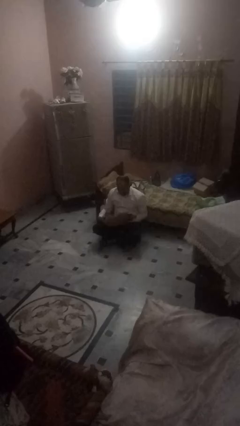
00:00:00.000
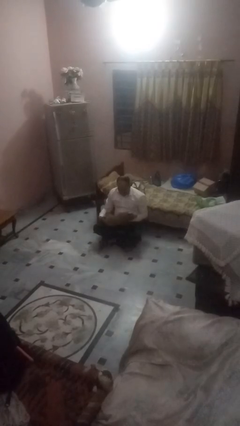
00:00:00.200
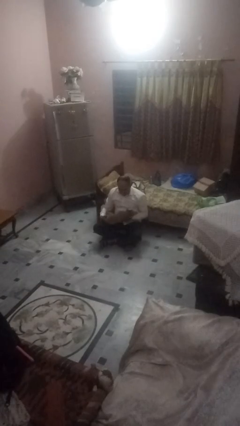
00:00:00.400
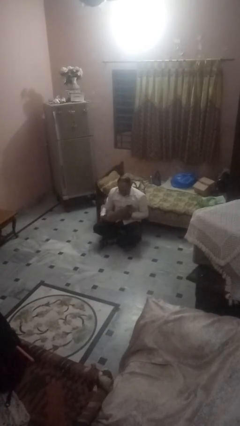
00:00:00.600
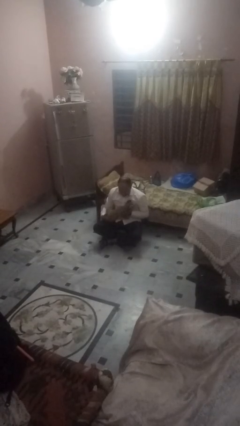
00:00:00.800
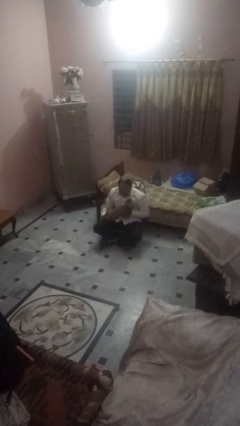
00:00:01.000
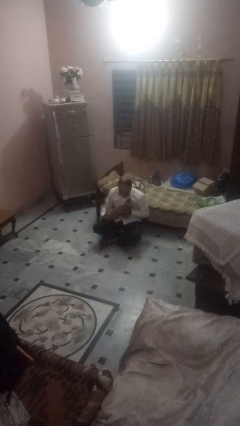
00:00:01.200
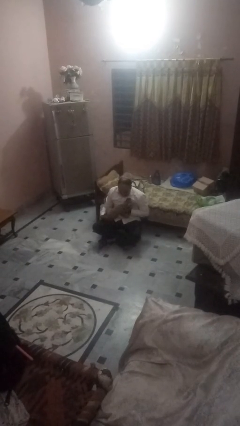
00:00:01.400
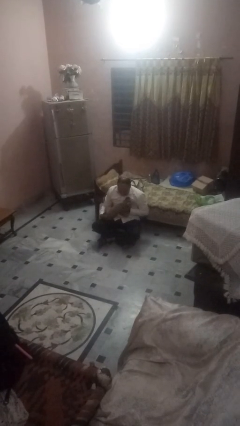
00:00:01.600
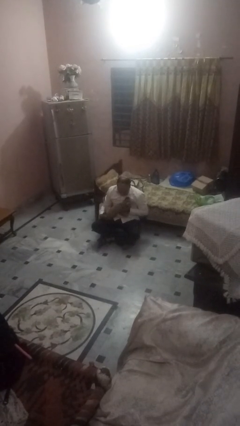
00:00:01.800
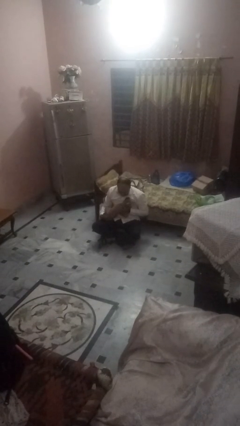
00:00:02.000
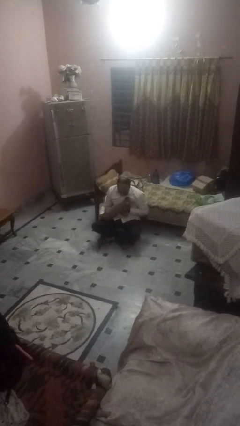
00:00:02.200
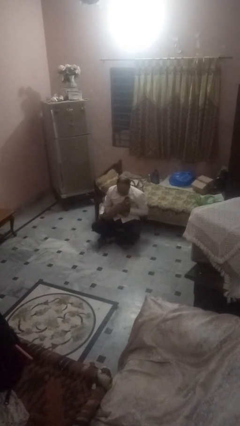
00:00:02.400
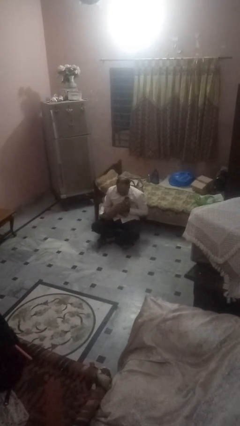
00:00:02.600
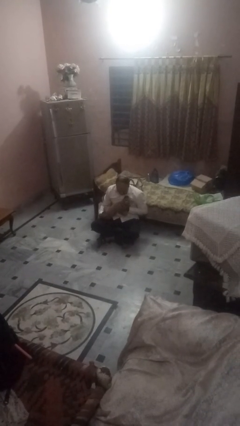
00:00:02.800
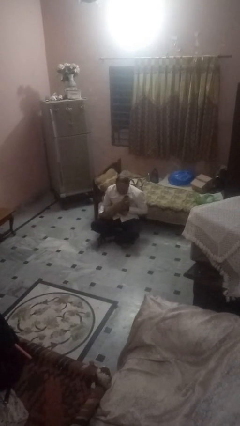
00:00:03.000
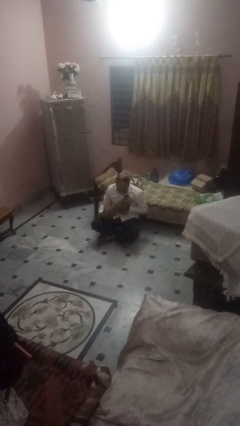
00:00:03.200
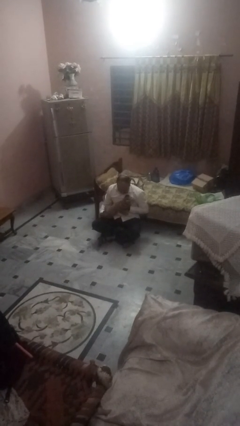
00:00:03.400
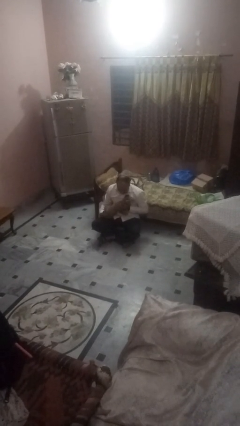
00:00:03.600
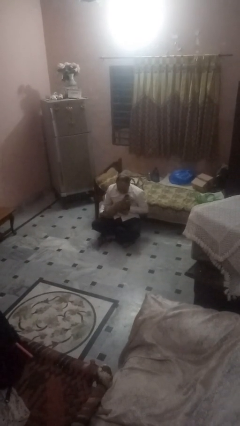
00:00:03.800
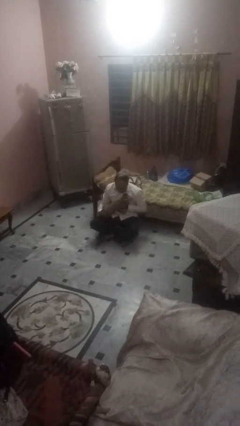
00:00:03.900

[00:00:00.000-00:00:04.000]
person hugs dog

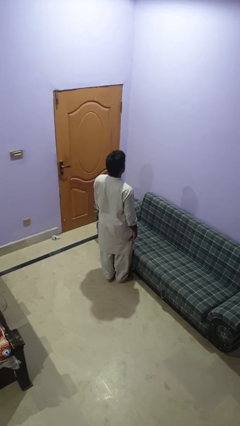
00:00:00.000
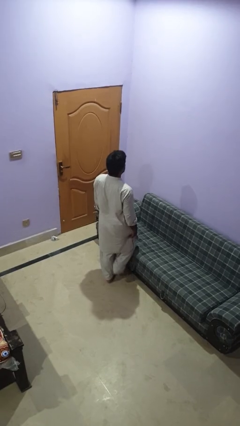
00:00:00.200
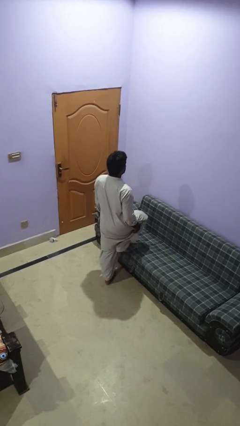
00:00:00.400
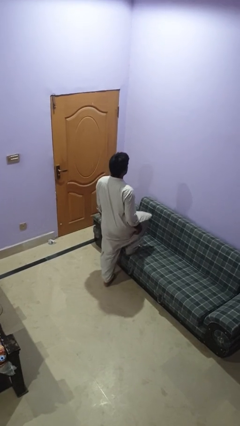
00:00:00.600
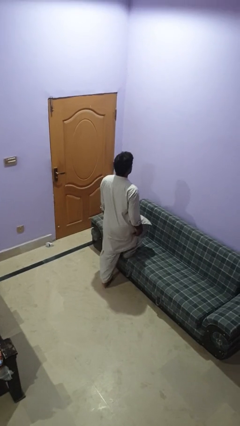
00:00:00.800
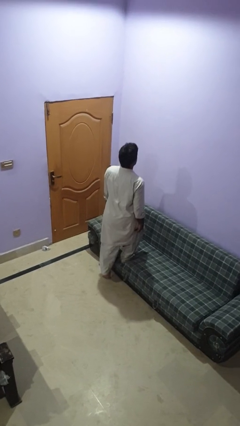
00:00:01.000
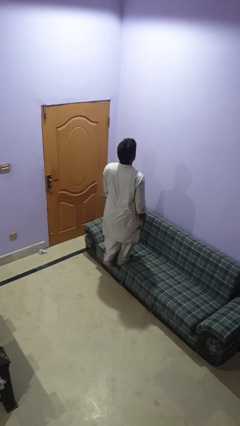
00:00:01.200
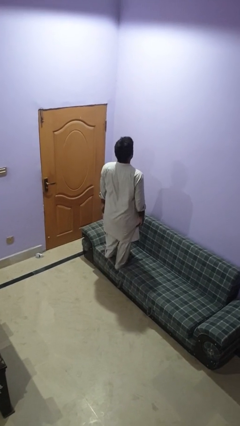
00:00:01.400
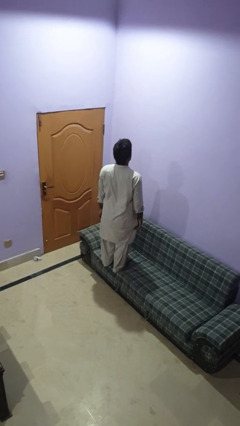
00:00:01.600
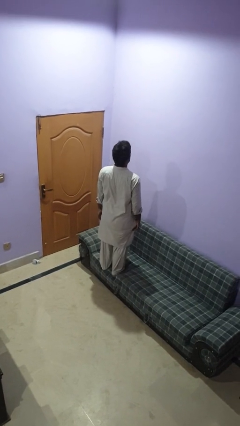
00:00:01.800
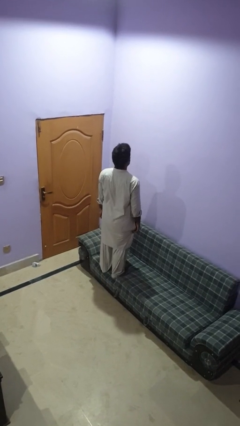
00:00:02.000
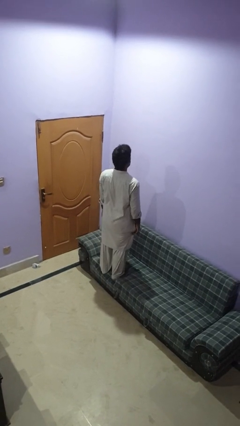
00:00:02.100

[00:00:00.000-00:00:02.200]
person climbs on couch

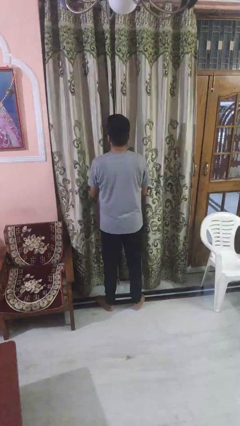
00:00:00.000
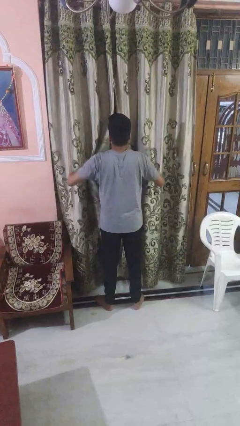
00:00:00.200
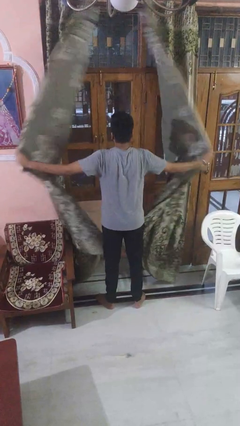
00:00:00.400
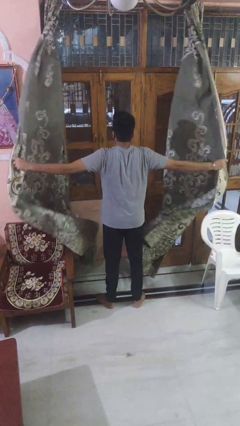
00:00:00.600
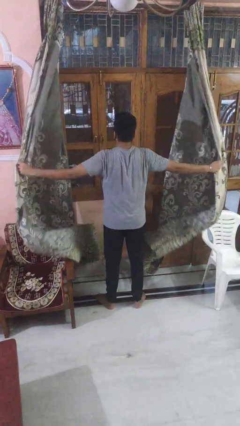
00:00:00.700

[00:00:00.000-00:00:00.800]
person opens curtains

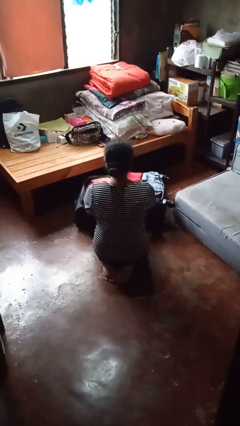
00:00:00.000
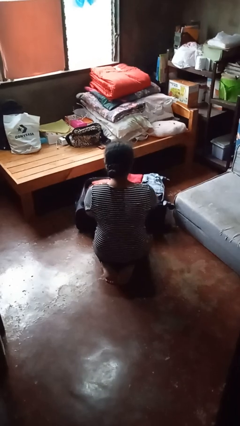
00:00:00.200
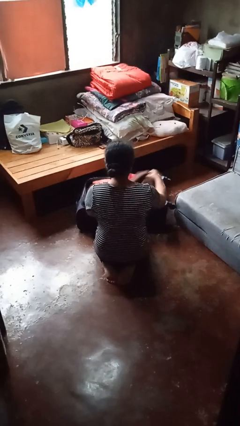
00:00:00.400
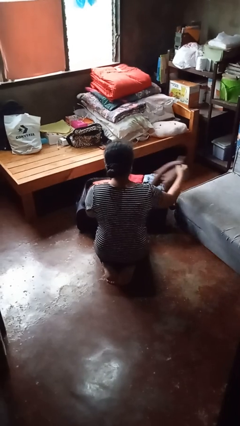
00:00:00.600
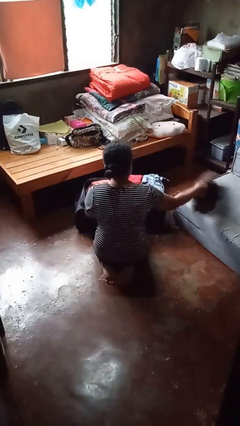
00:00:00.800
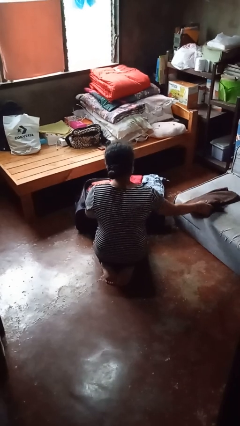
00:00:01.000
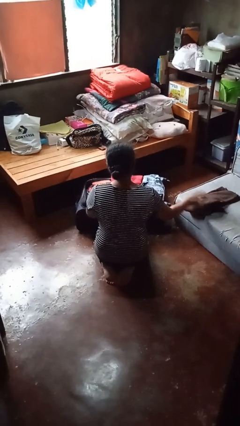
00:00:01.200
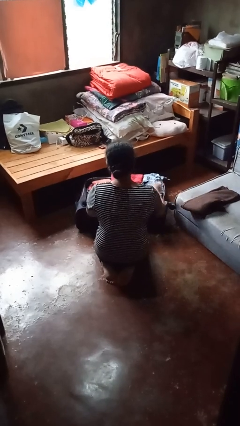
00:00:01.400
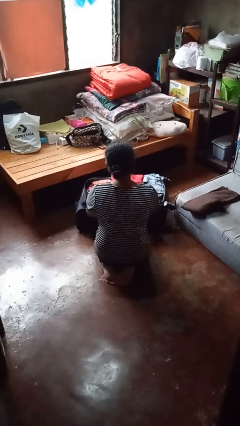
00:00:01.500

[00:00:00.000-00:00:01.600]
person unloads clothes from suitcase

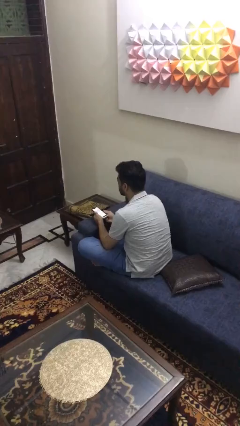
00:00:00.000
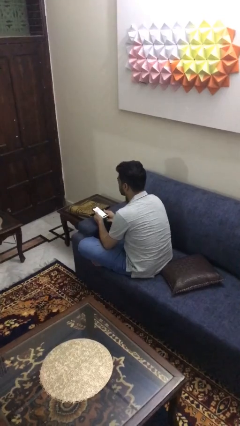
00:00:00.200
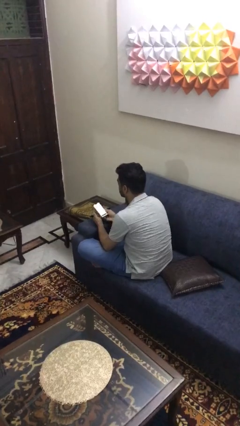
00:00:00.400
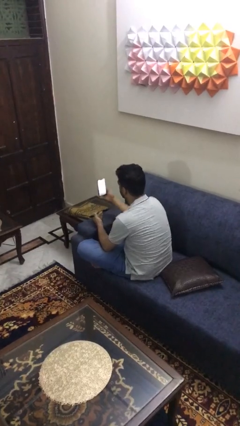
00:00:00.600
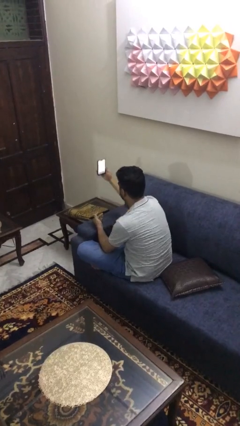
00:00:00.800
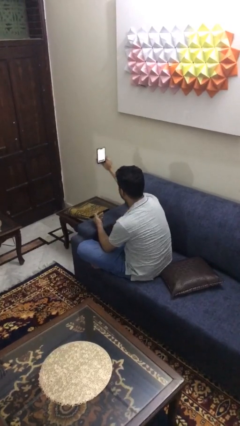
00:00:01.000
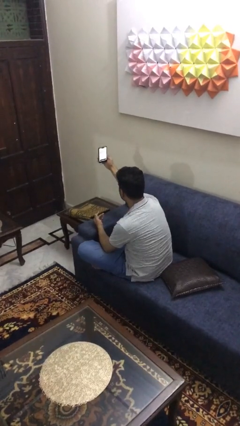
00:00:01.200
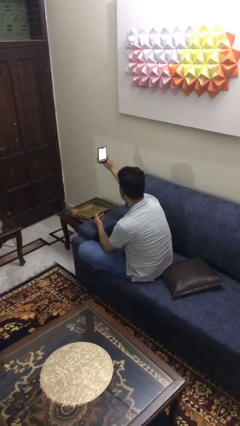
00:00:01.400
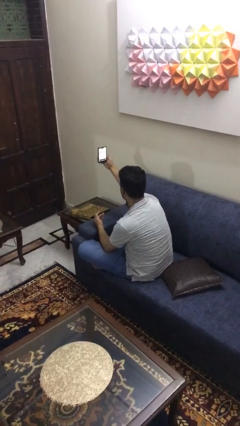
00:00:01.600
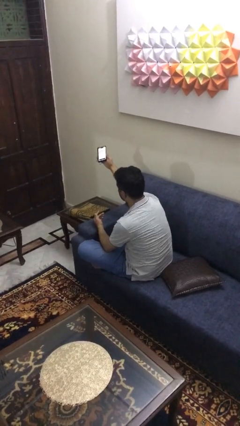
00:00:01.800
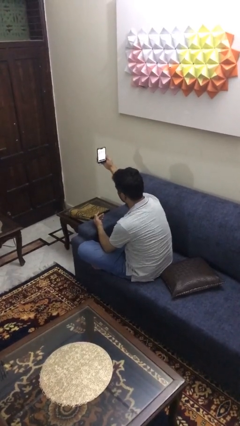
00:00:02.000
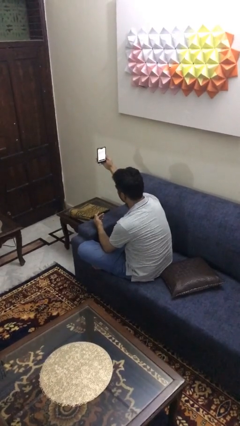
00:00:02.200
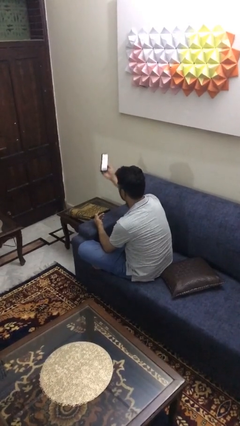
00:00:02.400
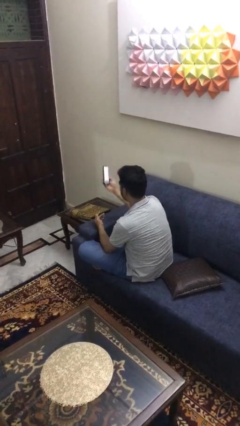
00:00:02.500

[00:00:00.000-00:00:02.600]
person takes selfie

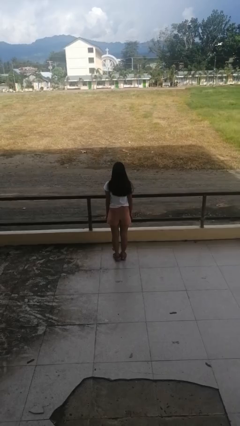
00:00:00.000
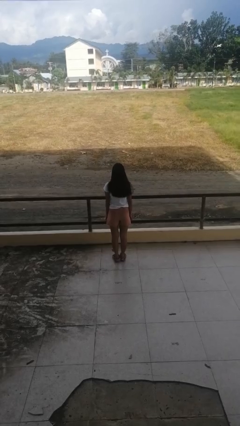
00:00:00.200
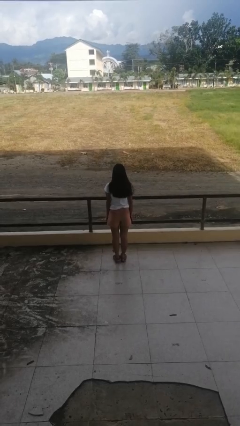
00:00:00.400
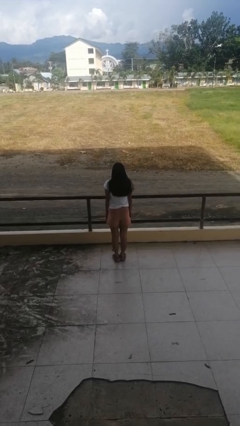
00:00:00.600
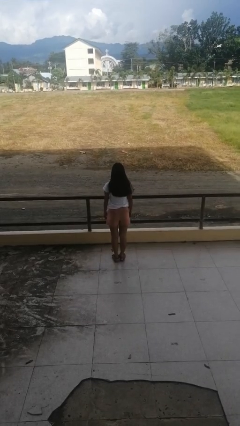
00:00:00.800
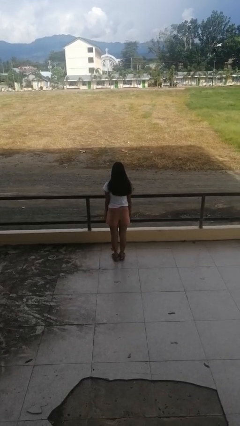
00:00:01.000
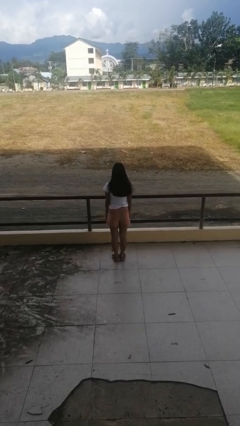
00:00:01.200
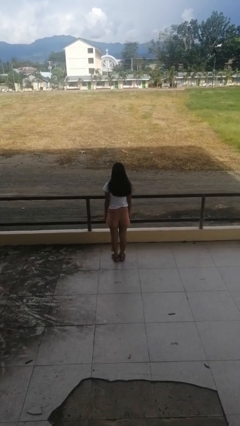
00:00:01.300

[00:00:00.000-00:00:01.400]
person shrugs

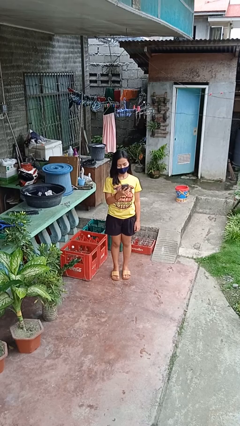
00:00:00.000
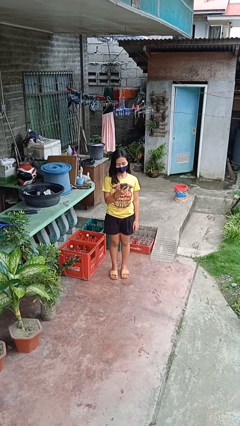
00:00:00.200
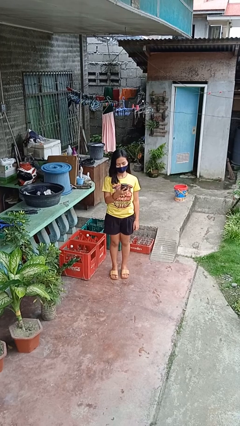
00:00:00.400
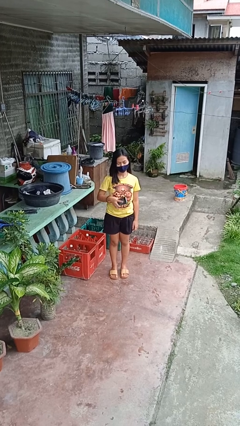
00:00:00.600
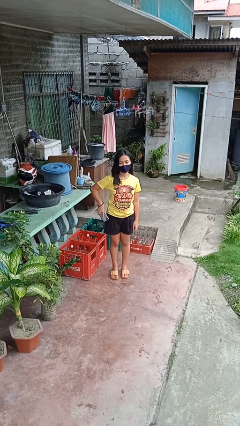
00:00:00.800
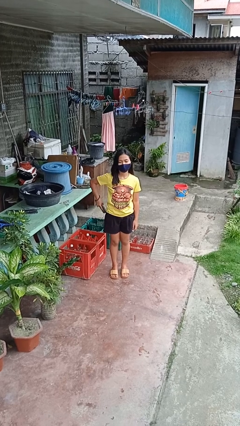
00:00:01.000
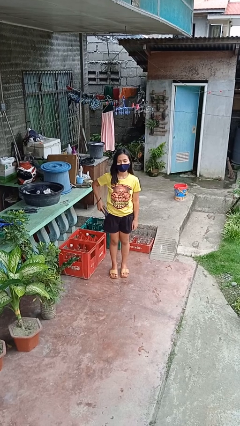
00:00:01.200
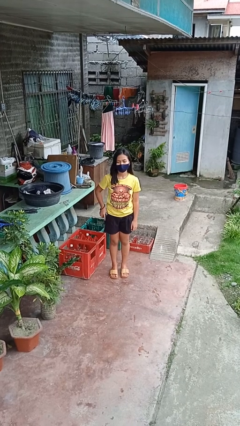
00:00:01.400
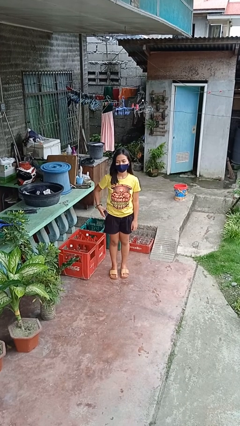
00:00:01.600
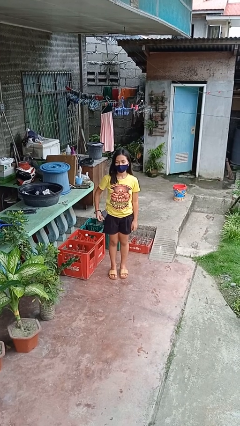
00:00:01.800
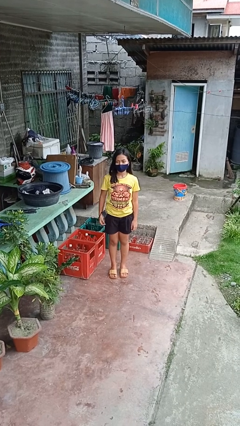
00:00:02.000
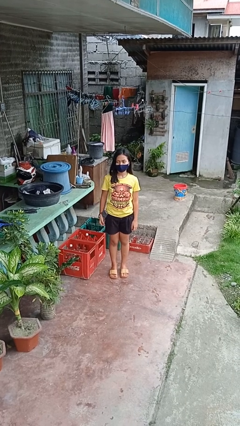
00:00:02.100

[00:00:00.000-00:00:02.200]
person puts phone into pocket

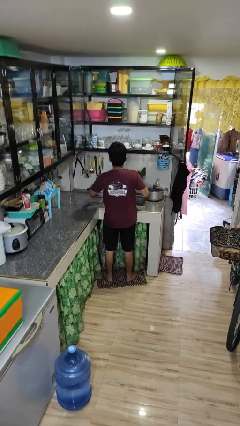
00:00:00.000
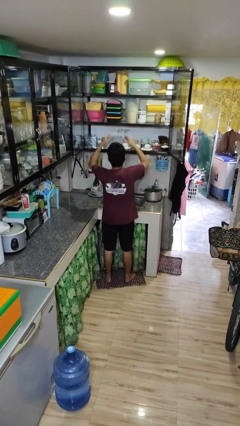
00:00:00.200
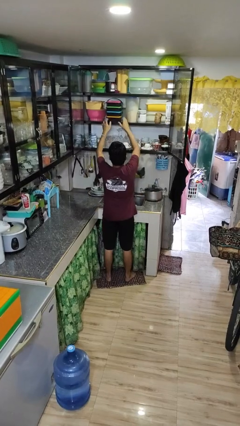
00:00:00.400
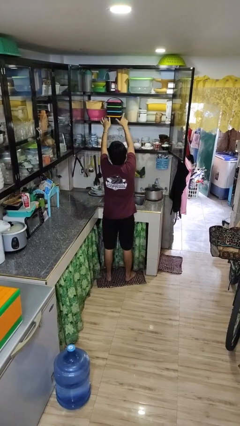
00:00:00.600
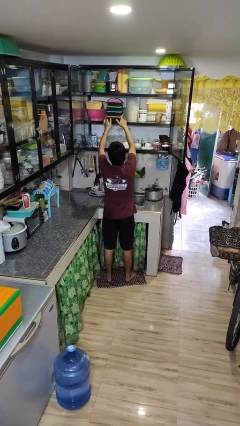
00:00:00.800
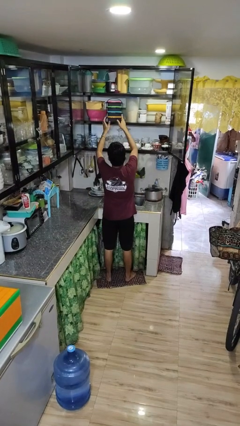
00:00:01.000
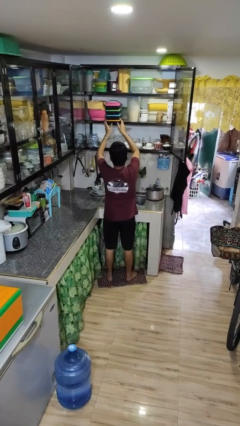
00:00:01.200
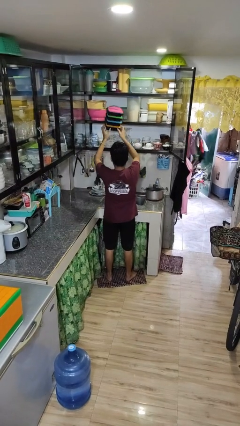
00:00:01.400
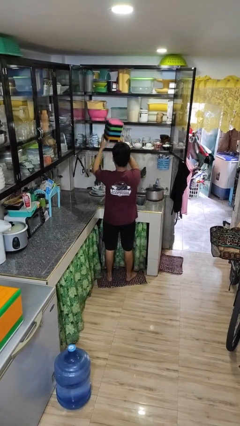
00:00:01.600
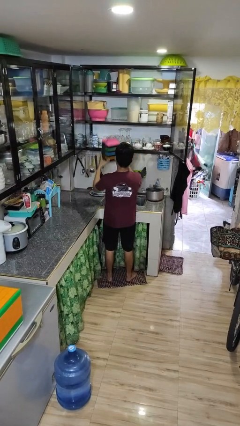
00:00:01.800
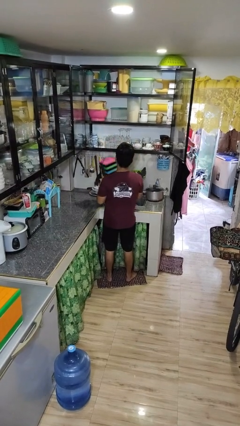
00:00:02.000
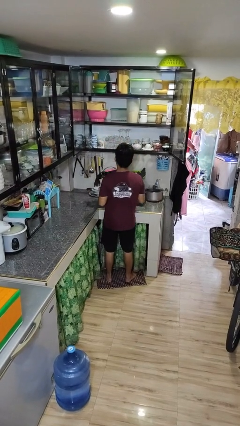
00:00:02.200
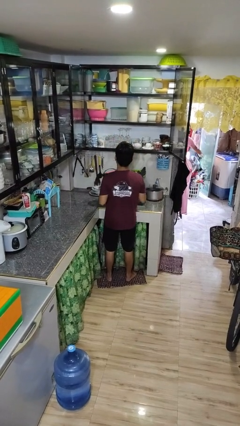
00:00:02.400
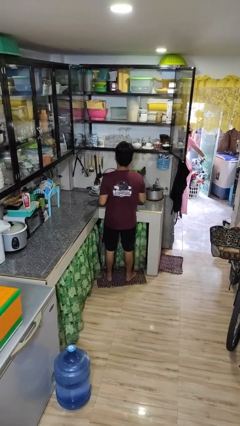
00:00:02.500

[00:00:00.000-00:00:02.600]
person picks up object from cabinet
